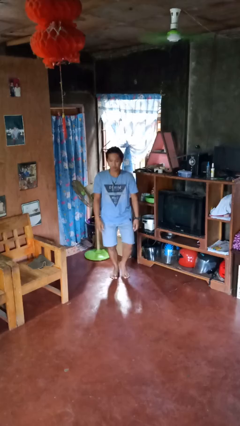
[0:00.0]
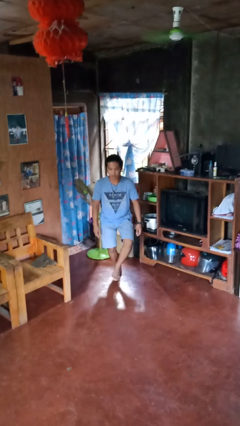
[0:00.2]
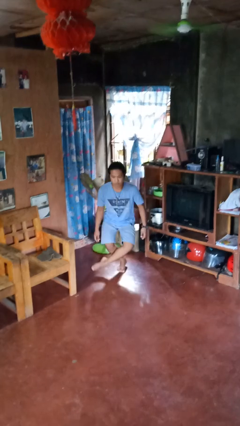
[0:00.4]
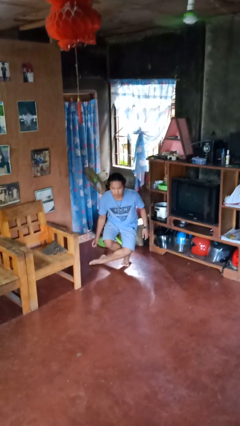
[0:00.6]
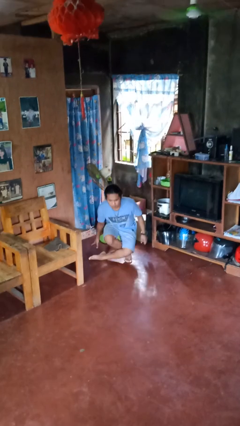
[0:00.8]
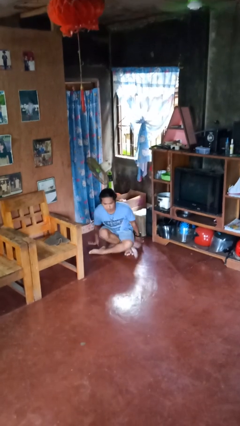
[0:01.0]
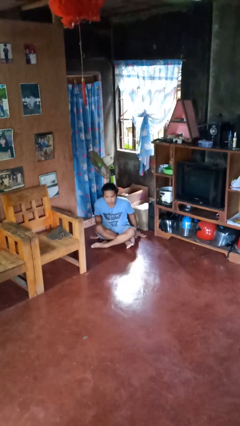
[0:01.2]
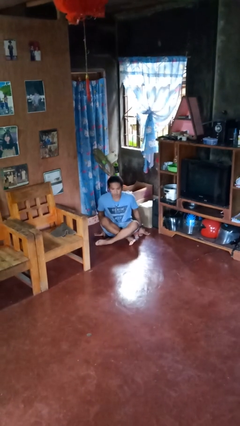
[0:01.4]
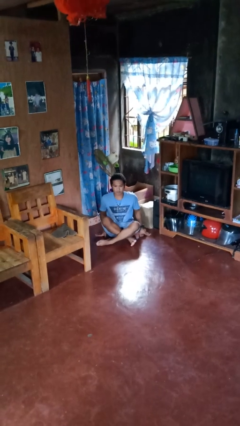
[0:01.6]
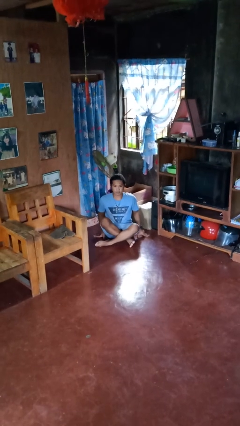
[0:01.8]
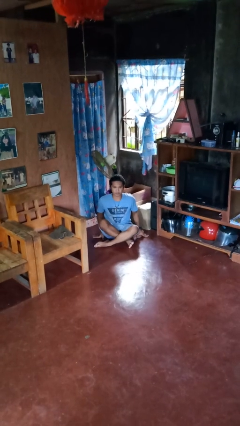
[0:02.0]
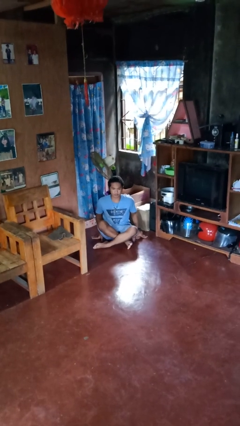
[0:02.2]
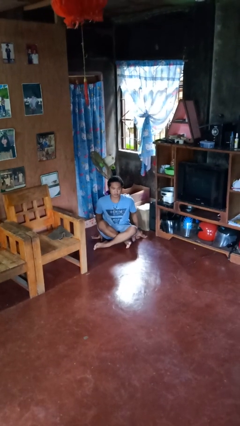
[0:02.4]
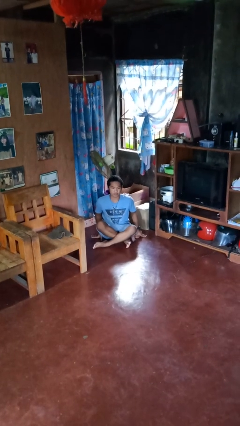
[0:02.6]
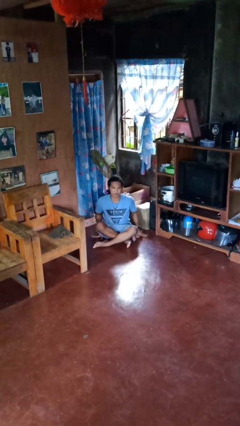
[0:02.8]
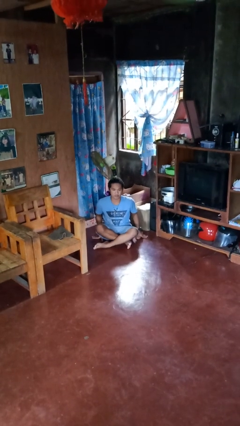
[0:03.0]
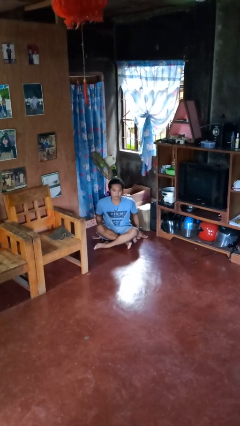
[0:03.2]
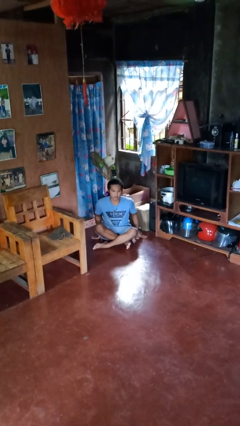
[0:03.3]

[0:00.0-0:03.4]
person sits crisscross

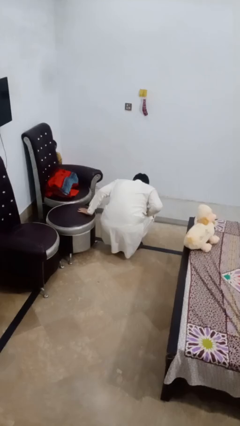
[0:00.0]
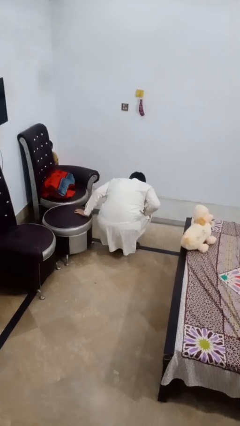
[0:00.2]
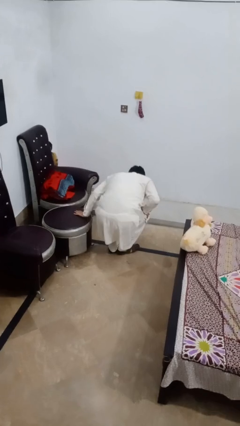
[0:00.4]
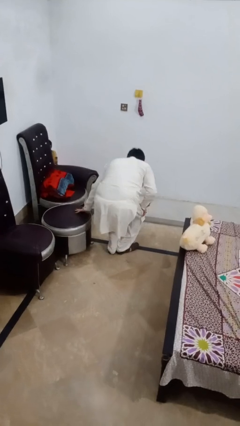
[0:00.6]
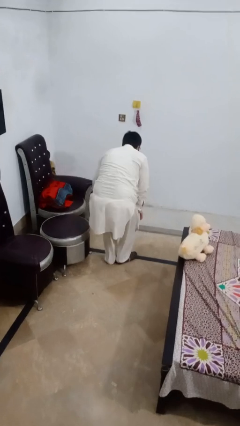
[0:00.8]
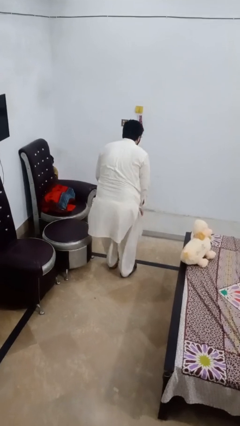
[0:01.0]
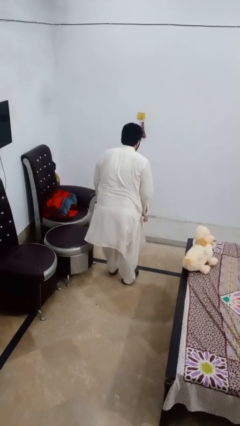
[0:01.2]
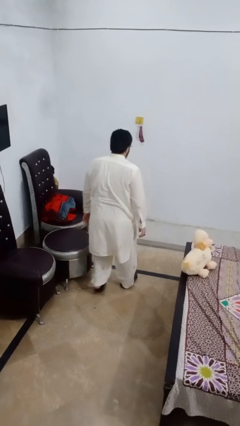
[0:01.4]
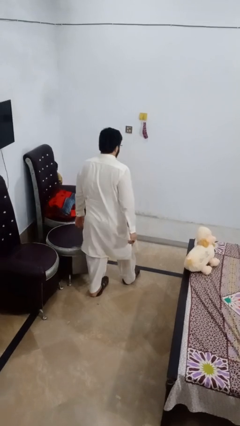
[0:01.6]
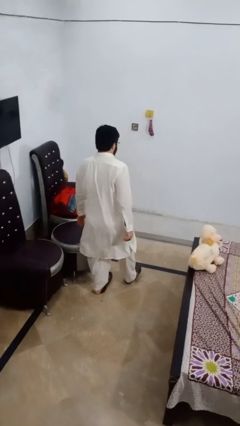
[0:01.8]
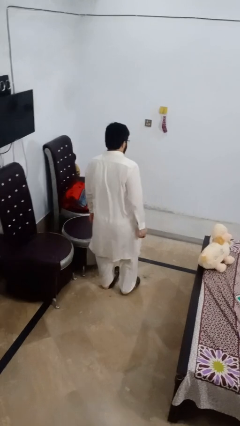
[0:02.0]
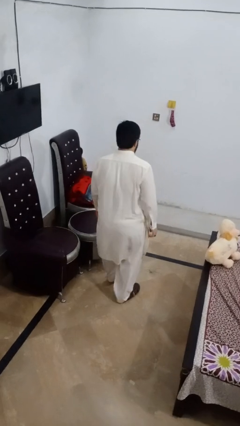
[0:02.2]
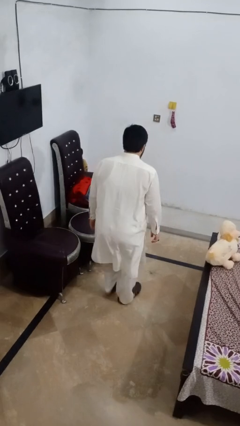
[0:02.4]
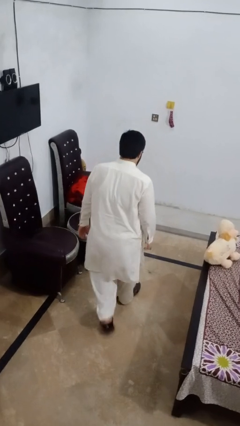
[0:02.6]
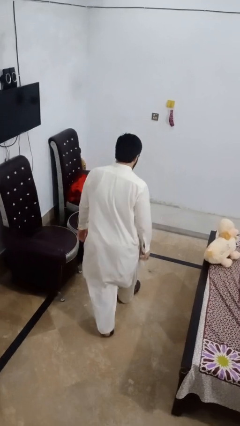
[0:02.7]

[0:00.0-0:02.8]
person stands up from floor

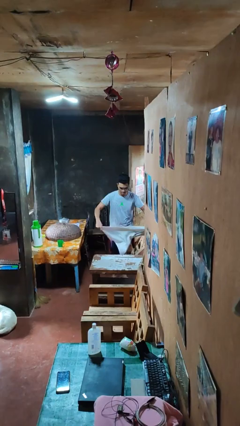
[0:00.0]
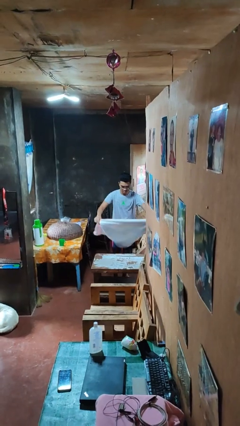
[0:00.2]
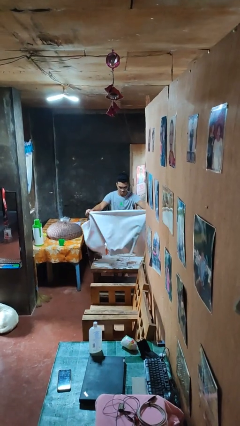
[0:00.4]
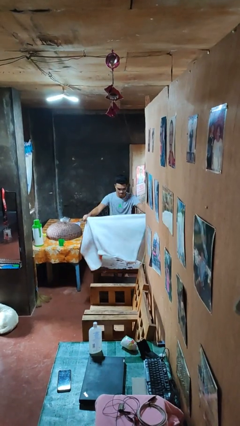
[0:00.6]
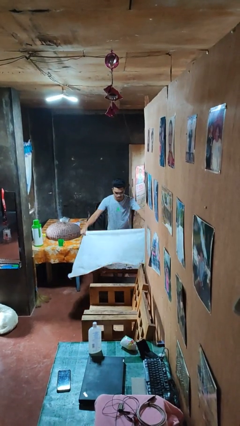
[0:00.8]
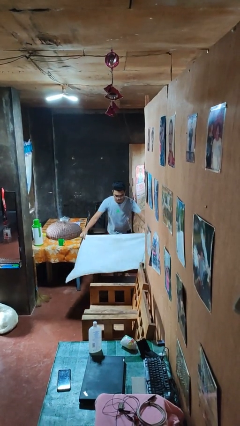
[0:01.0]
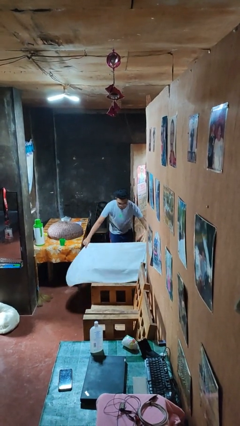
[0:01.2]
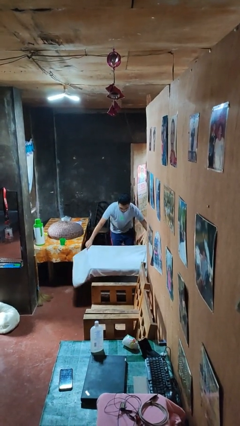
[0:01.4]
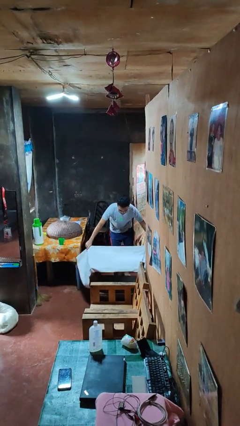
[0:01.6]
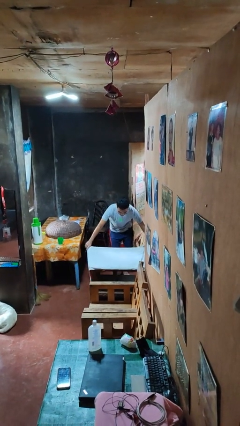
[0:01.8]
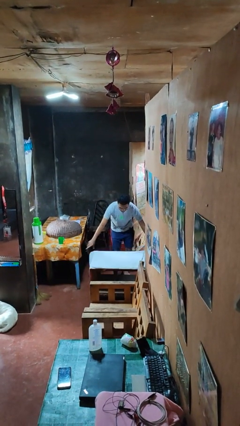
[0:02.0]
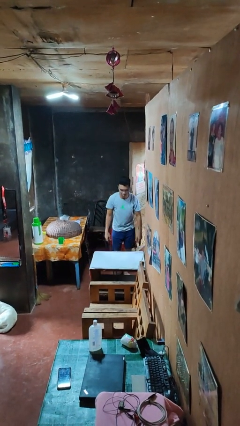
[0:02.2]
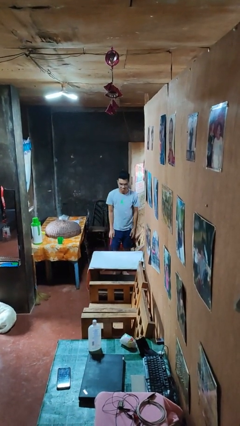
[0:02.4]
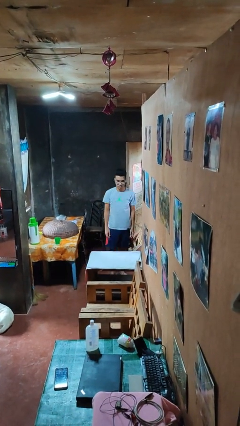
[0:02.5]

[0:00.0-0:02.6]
person spreads tablecloth

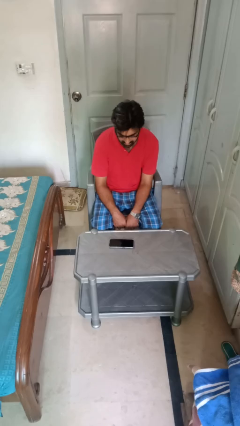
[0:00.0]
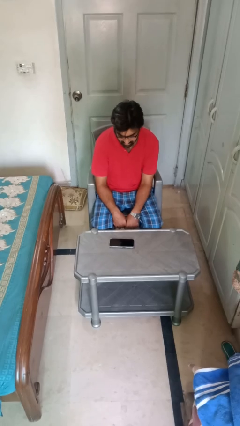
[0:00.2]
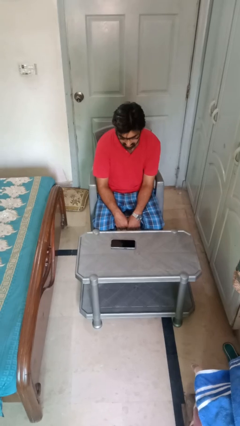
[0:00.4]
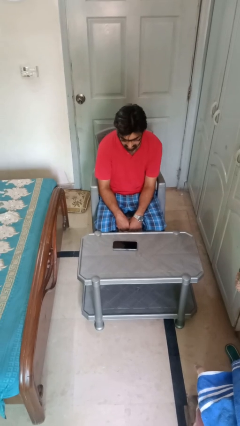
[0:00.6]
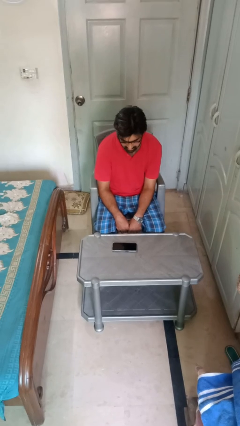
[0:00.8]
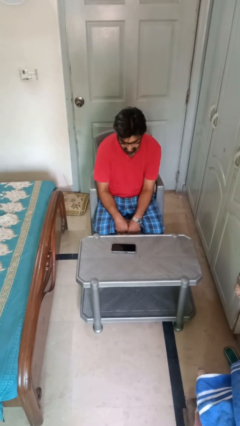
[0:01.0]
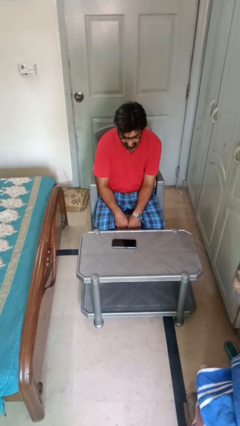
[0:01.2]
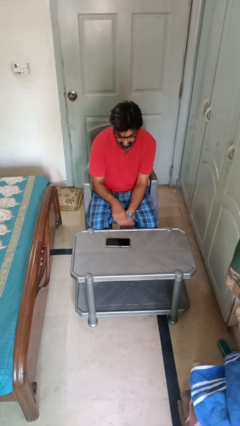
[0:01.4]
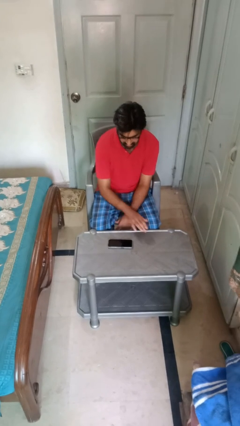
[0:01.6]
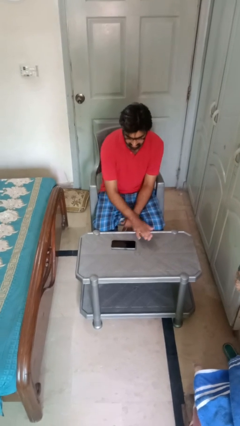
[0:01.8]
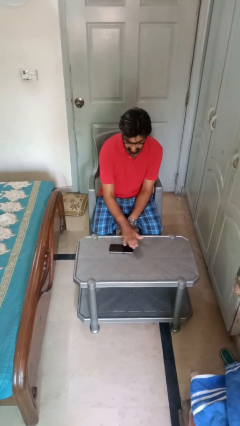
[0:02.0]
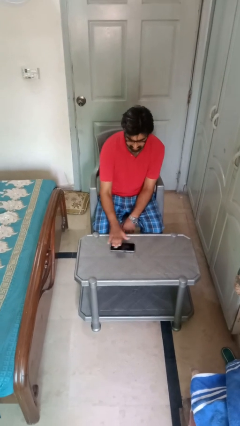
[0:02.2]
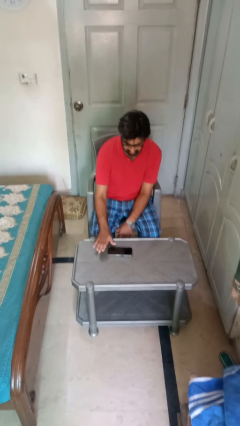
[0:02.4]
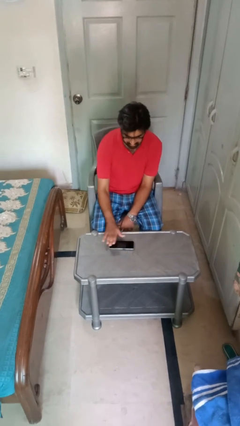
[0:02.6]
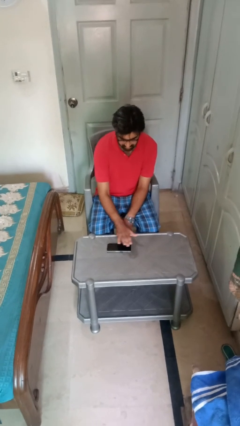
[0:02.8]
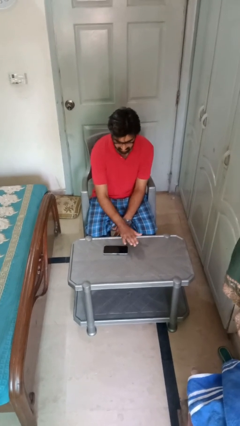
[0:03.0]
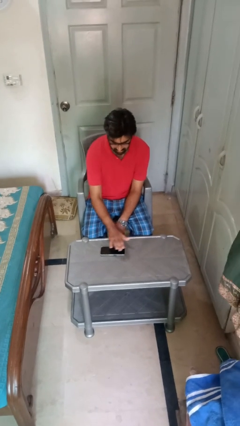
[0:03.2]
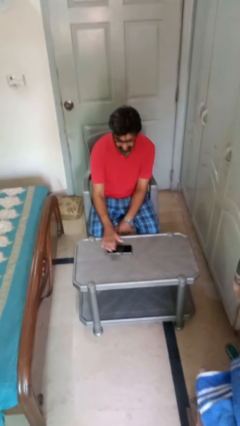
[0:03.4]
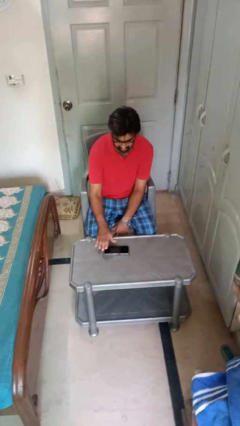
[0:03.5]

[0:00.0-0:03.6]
person waves hand over object

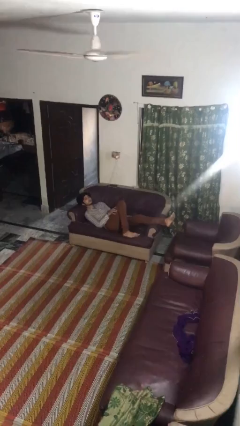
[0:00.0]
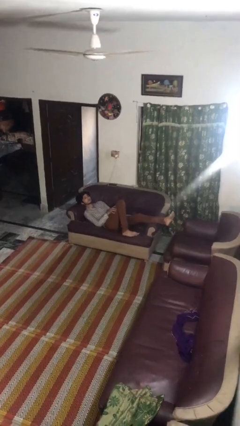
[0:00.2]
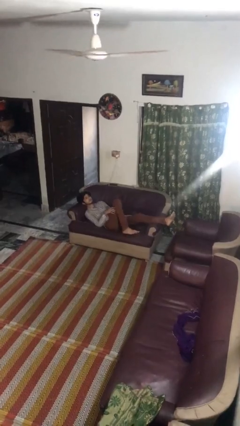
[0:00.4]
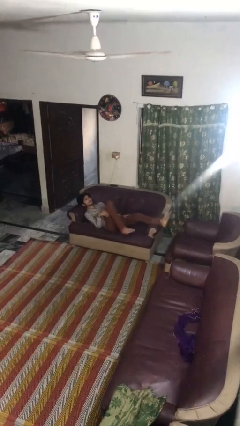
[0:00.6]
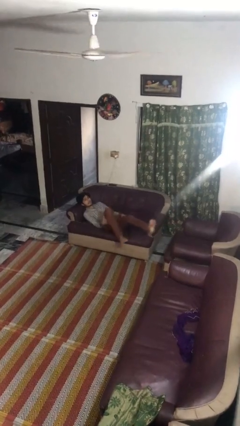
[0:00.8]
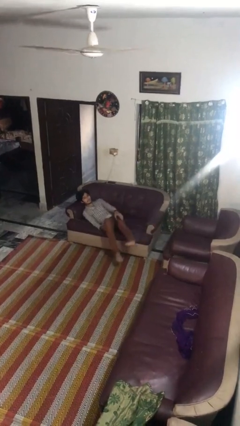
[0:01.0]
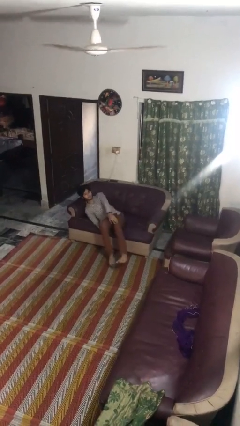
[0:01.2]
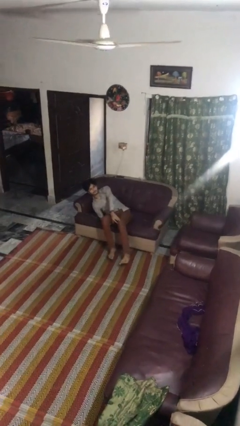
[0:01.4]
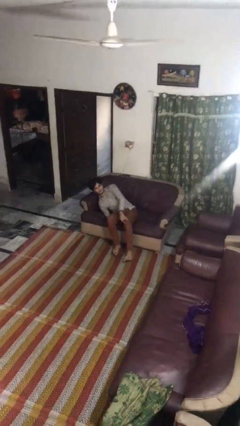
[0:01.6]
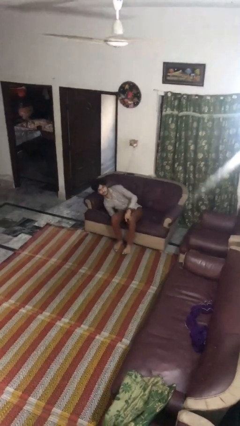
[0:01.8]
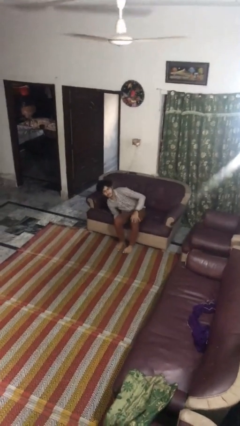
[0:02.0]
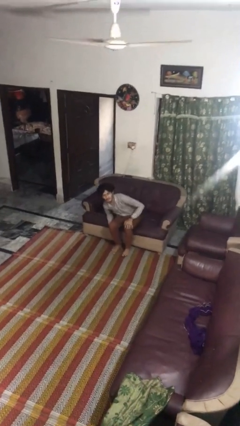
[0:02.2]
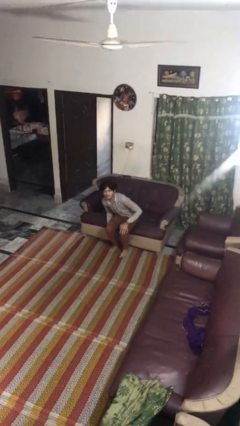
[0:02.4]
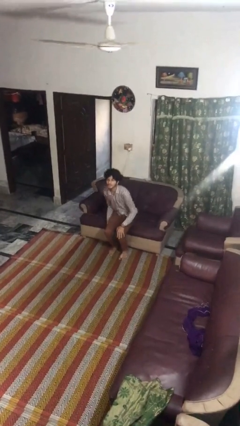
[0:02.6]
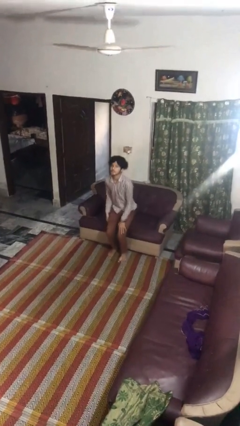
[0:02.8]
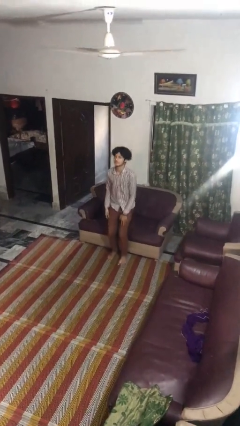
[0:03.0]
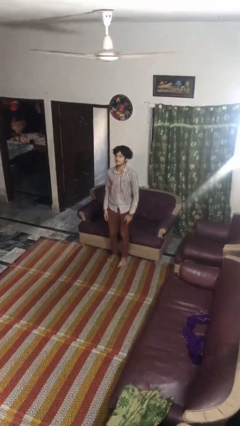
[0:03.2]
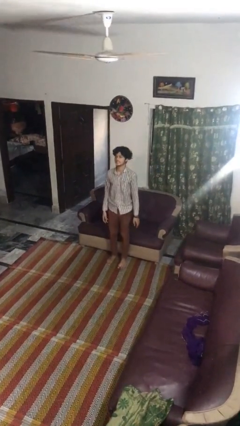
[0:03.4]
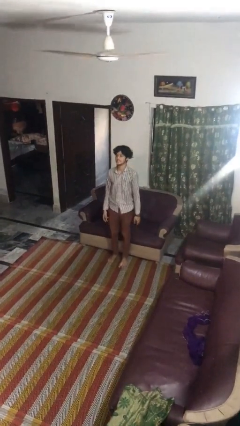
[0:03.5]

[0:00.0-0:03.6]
person stands up

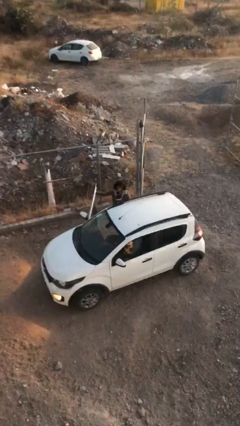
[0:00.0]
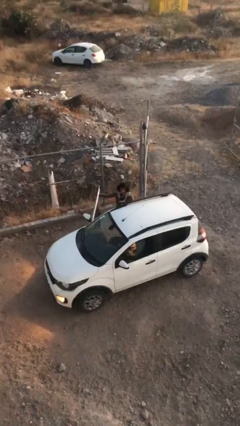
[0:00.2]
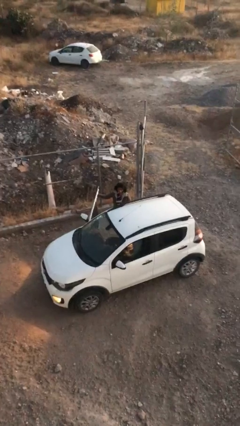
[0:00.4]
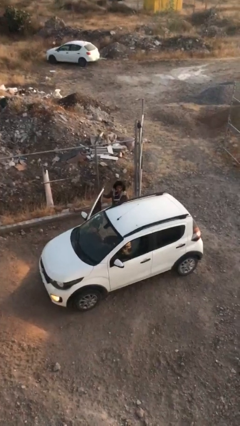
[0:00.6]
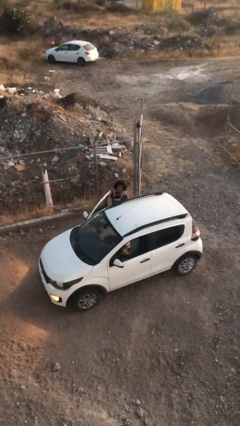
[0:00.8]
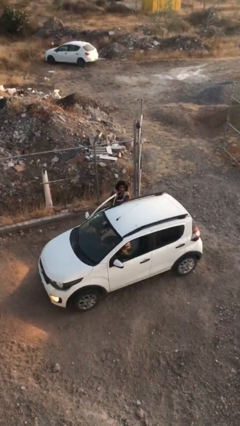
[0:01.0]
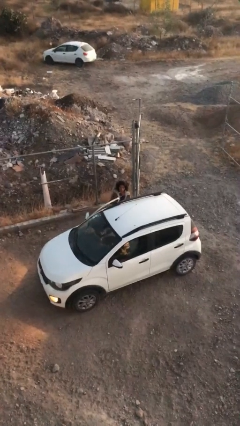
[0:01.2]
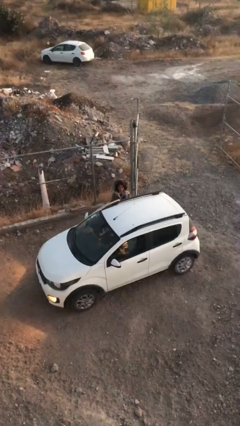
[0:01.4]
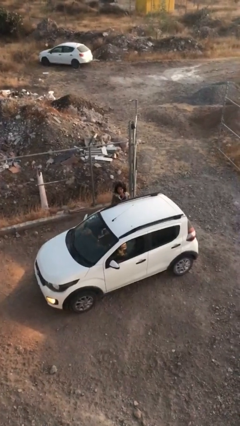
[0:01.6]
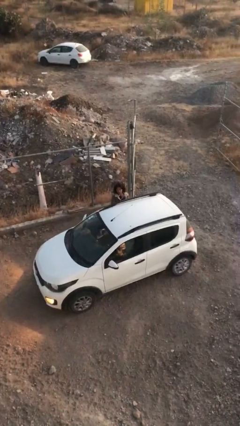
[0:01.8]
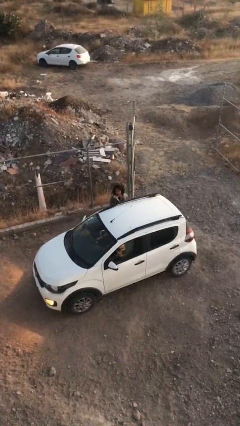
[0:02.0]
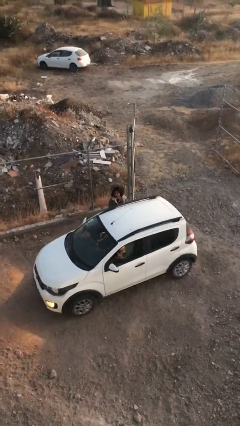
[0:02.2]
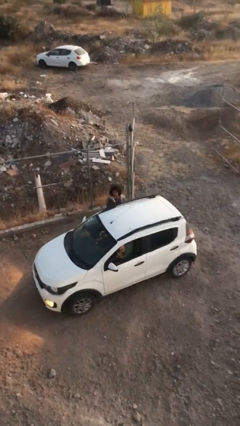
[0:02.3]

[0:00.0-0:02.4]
person closes car door
